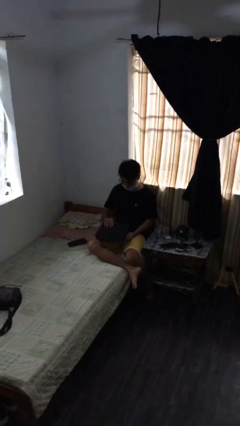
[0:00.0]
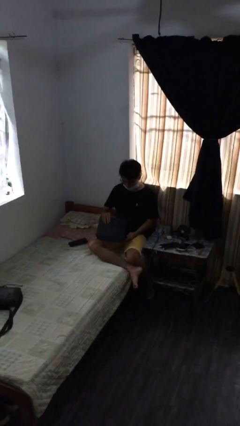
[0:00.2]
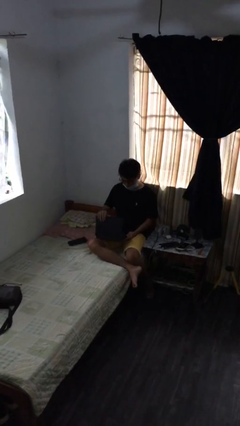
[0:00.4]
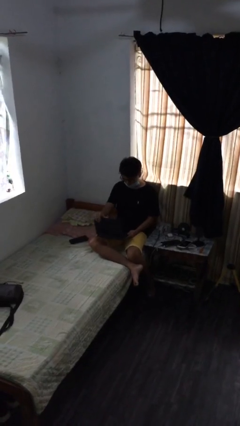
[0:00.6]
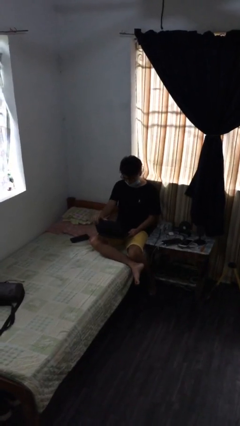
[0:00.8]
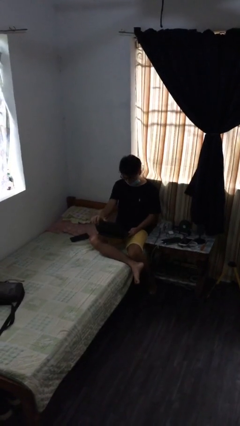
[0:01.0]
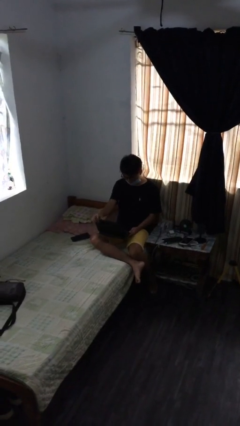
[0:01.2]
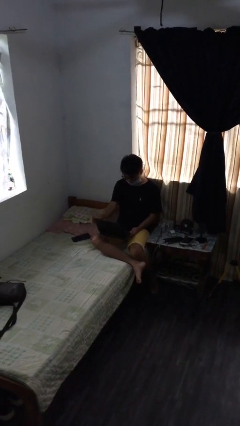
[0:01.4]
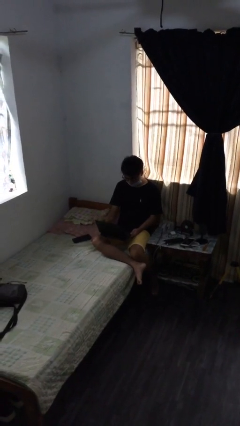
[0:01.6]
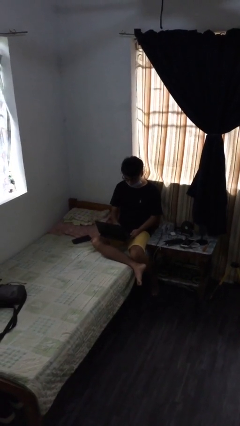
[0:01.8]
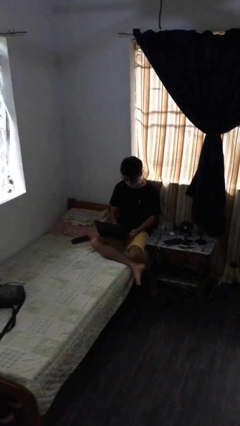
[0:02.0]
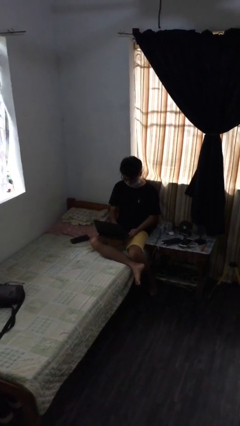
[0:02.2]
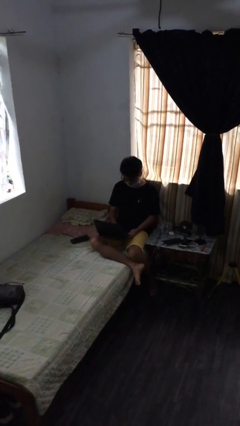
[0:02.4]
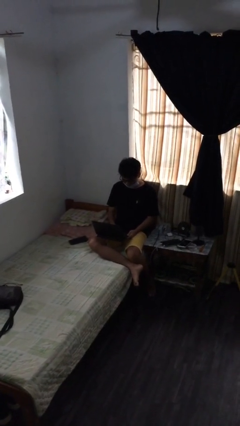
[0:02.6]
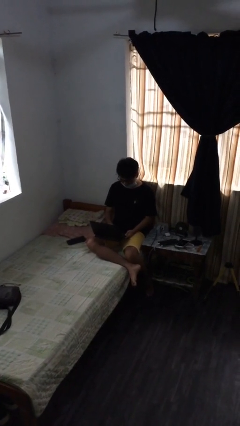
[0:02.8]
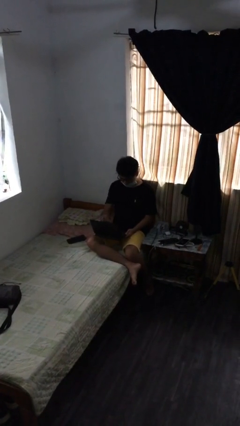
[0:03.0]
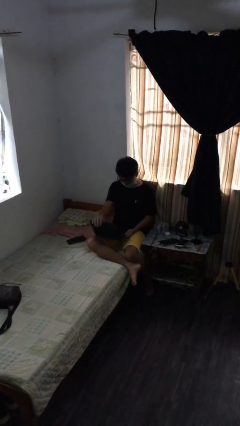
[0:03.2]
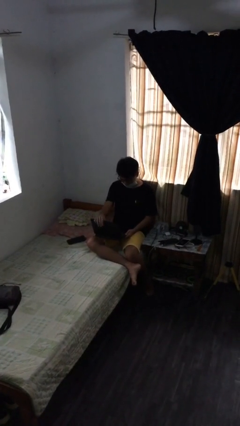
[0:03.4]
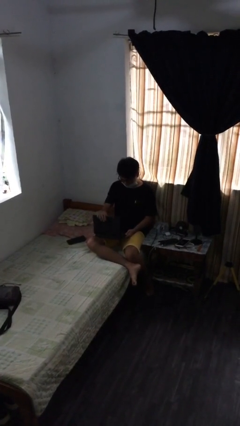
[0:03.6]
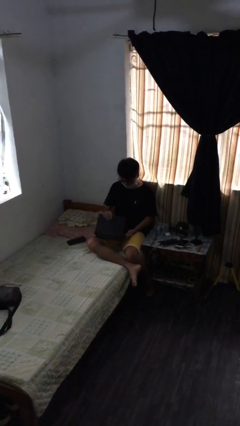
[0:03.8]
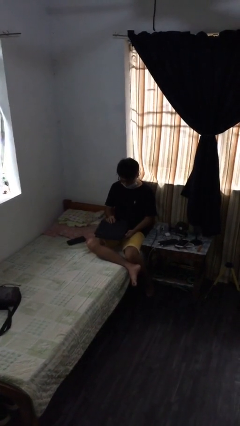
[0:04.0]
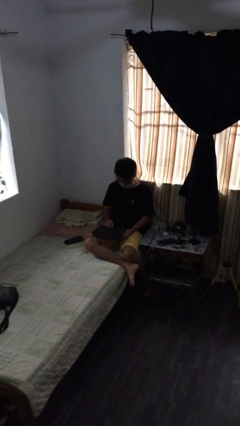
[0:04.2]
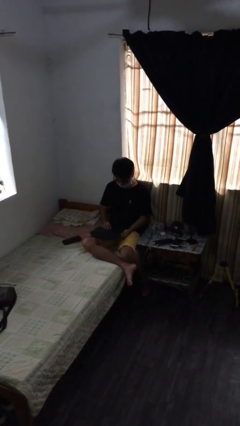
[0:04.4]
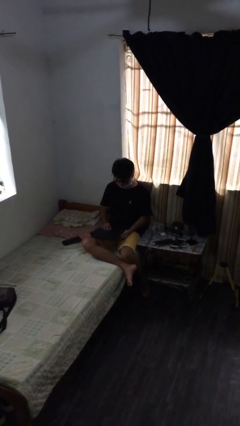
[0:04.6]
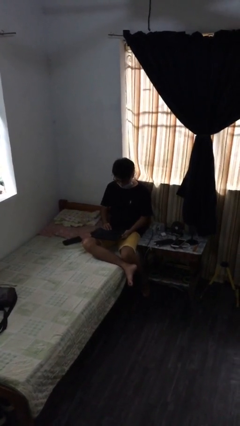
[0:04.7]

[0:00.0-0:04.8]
person interacts with laptop

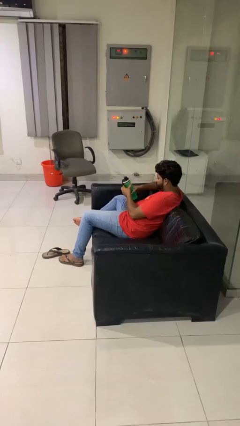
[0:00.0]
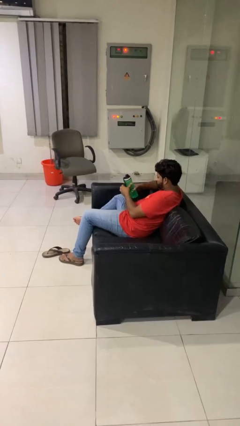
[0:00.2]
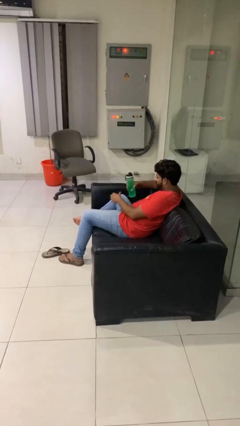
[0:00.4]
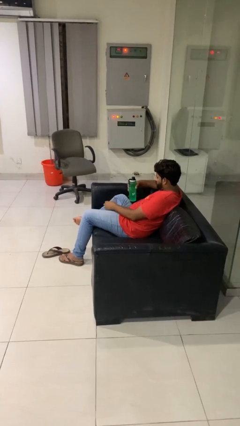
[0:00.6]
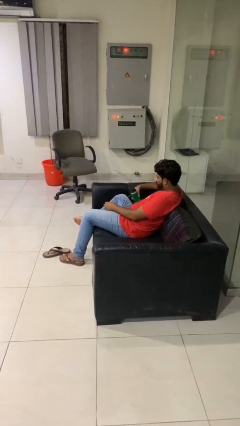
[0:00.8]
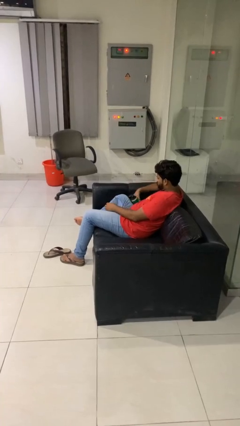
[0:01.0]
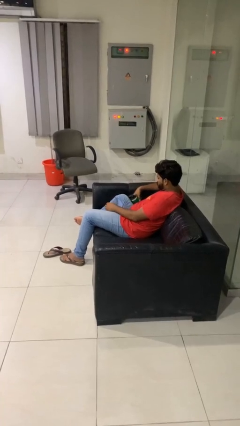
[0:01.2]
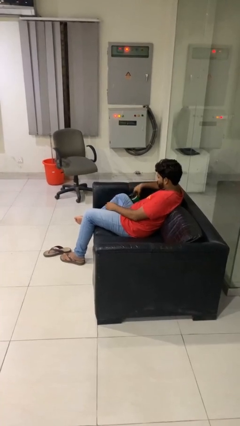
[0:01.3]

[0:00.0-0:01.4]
person puts down object on couch

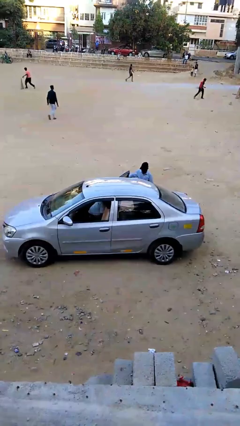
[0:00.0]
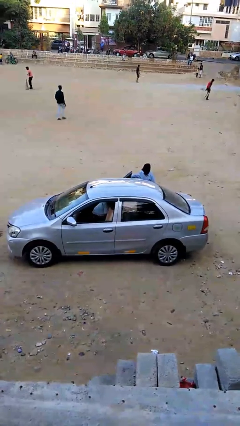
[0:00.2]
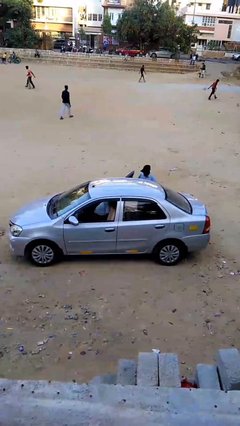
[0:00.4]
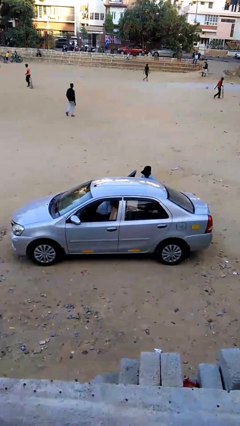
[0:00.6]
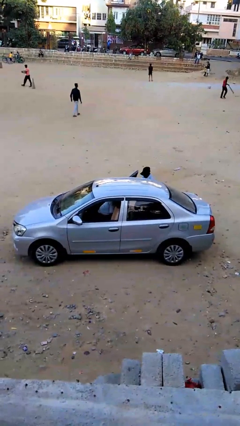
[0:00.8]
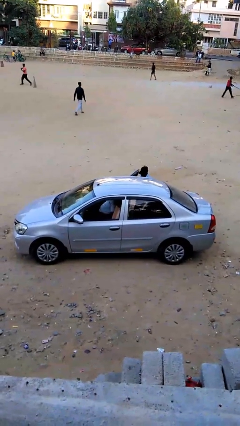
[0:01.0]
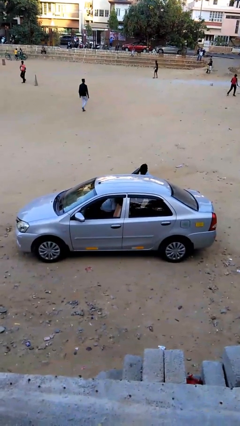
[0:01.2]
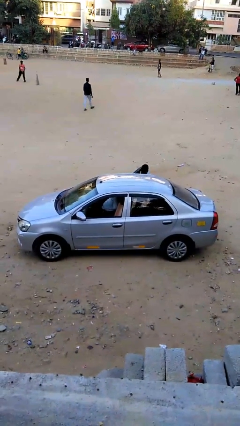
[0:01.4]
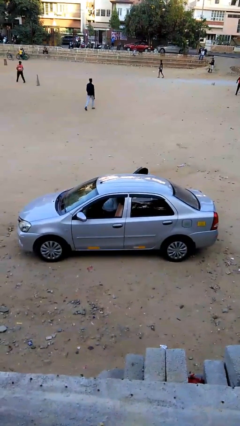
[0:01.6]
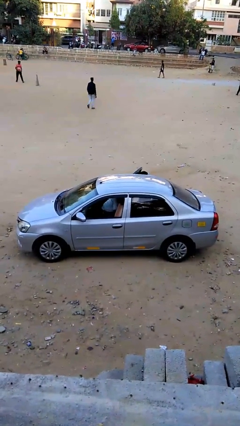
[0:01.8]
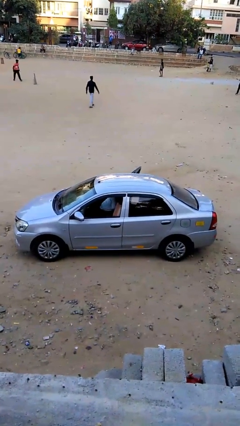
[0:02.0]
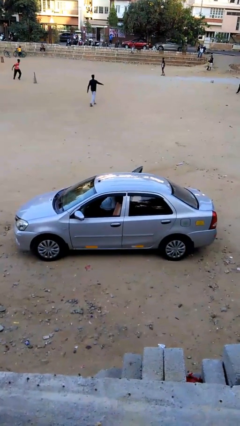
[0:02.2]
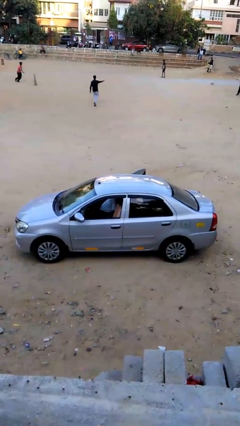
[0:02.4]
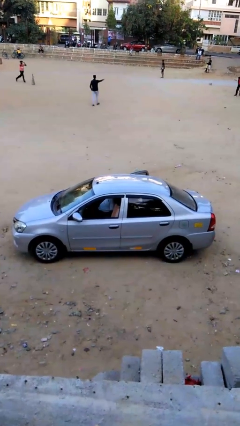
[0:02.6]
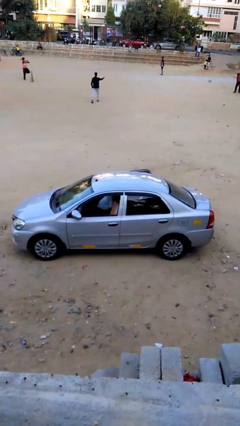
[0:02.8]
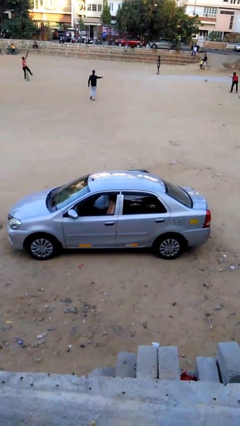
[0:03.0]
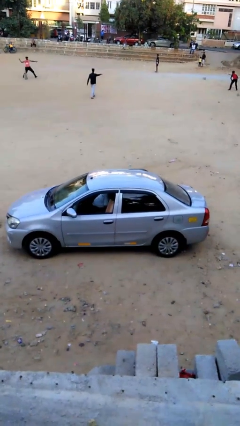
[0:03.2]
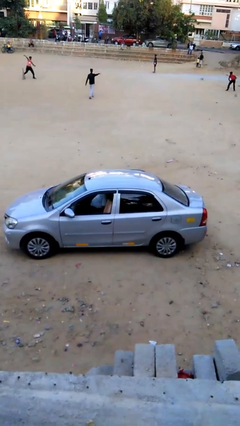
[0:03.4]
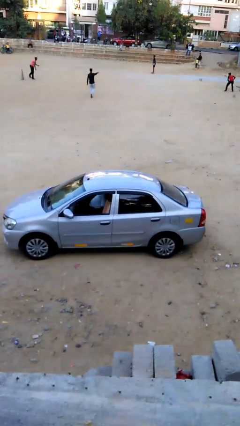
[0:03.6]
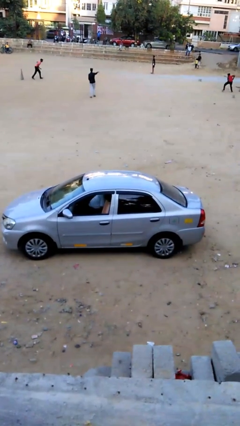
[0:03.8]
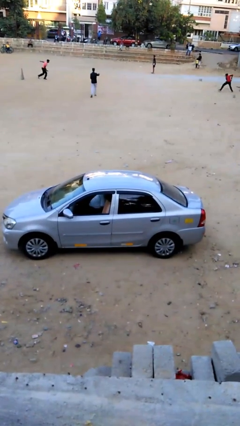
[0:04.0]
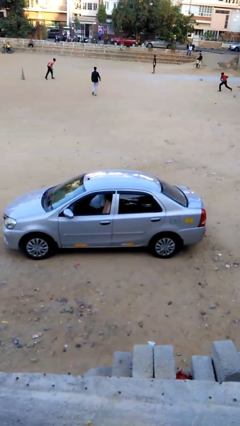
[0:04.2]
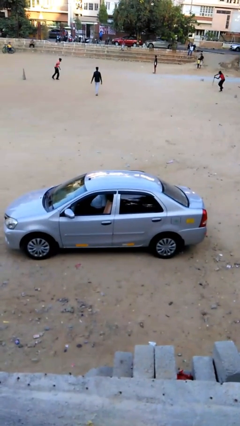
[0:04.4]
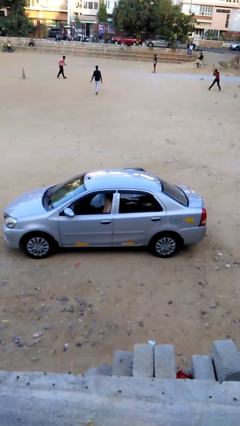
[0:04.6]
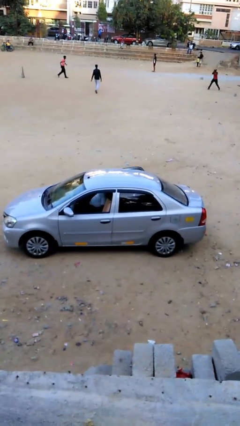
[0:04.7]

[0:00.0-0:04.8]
car picks up person

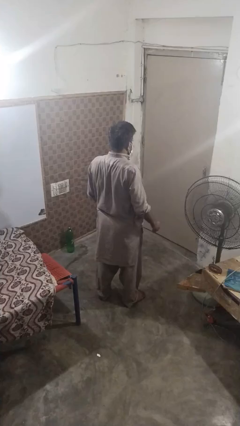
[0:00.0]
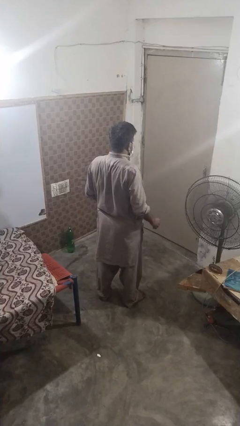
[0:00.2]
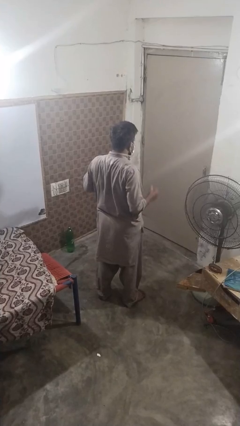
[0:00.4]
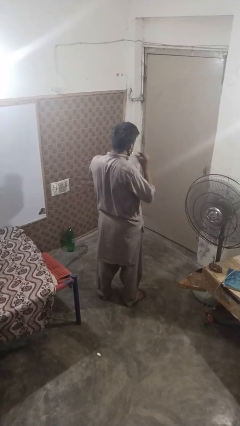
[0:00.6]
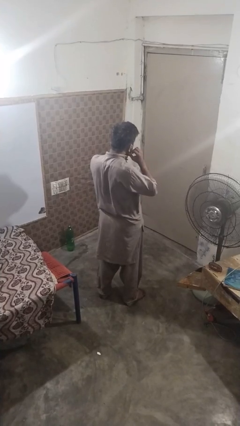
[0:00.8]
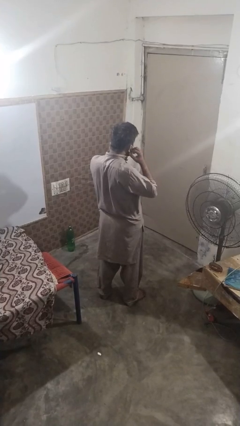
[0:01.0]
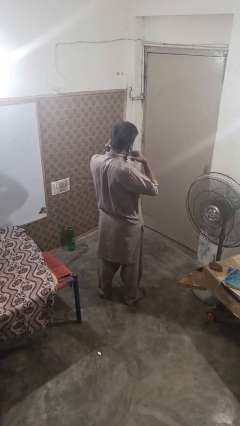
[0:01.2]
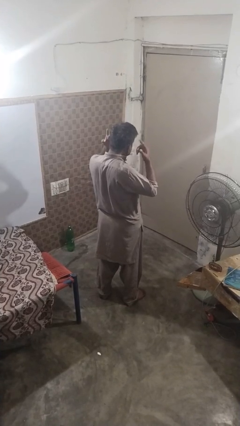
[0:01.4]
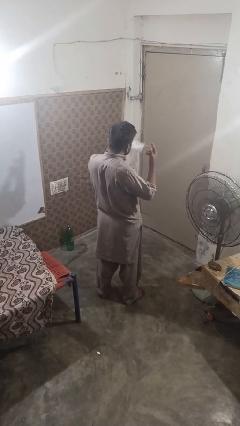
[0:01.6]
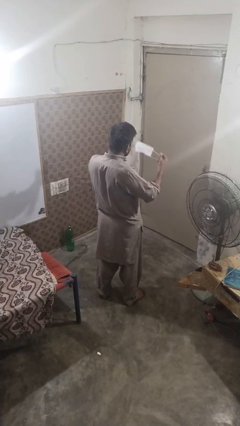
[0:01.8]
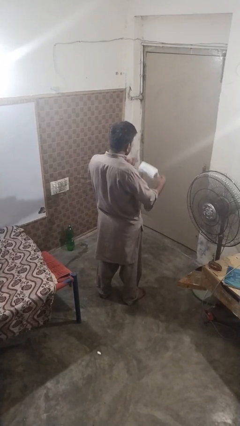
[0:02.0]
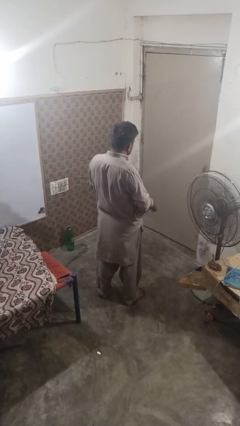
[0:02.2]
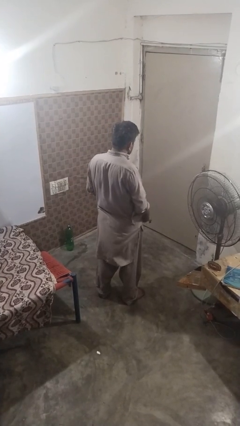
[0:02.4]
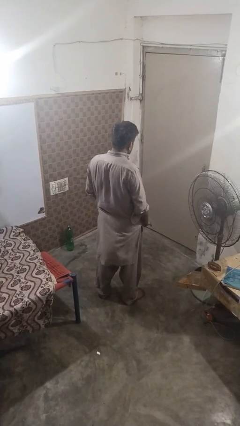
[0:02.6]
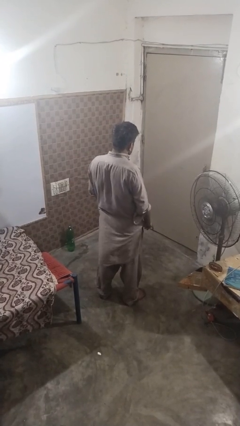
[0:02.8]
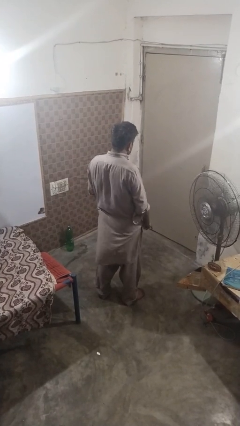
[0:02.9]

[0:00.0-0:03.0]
person takes off facemask

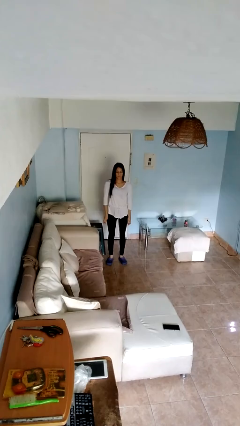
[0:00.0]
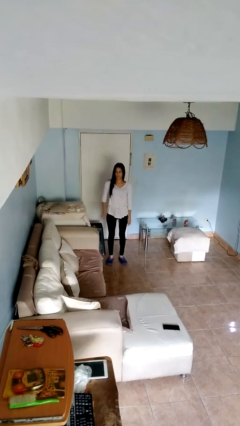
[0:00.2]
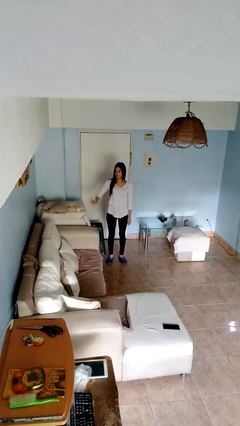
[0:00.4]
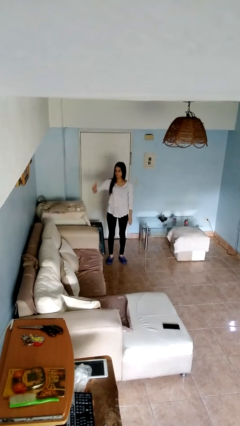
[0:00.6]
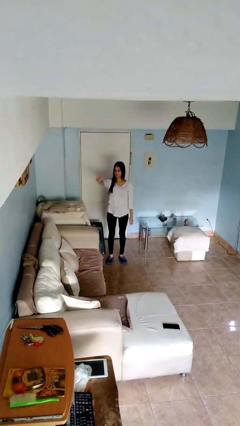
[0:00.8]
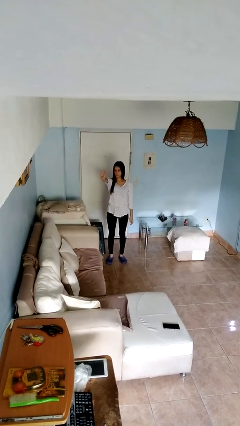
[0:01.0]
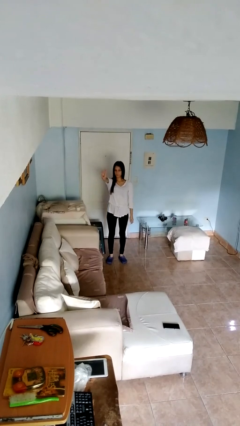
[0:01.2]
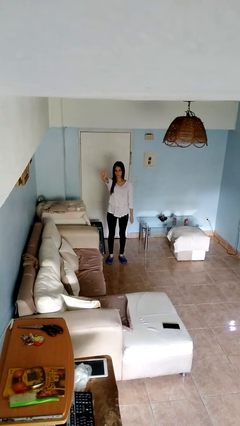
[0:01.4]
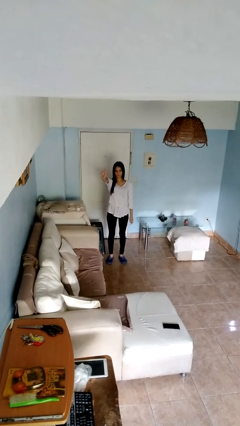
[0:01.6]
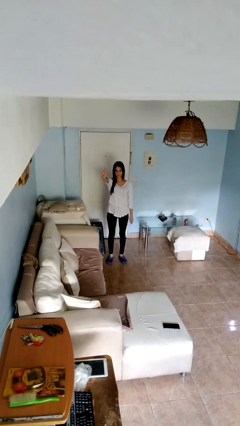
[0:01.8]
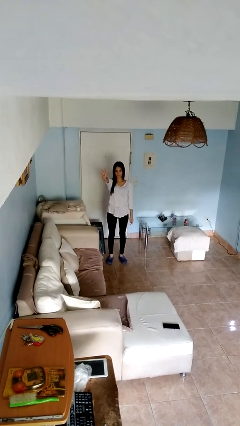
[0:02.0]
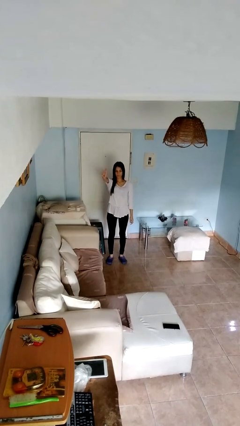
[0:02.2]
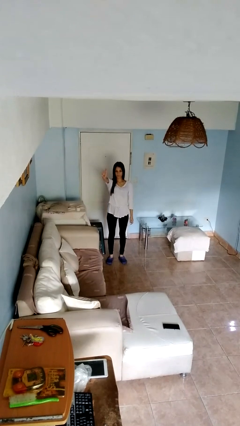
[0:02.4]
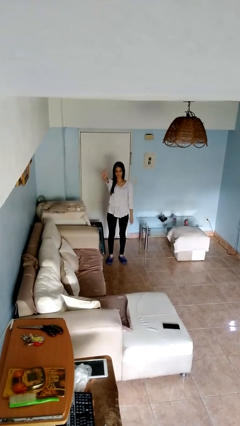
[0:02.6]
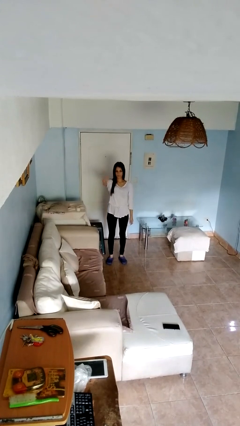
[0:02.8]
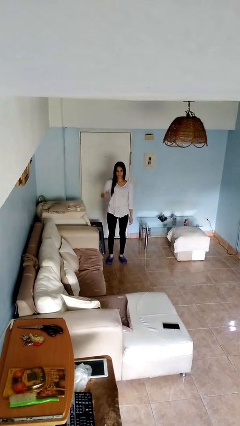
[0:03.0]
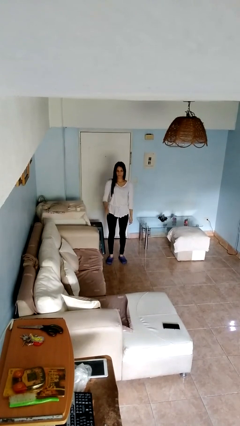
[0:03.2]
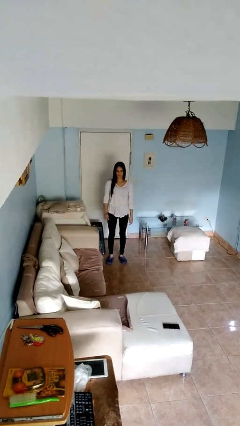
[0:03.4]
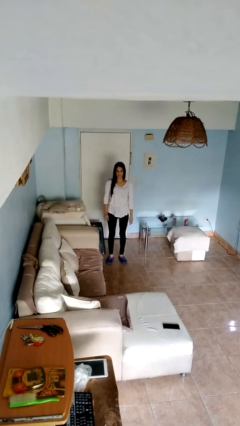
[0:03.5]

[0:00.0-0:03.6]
person gestures number three
